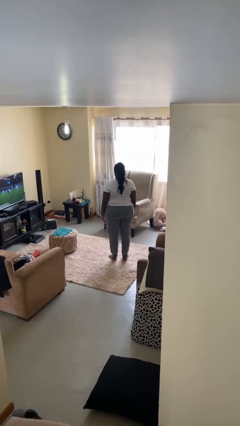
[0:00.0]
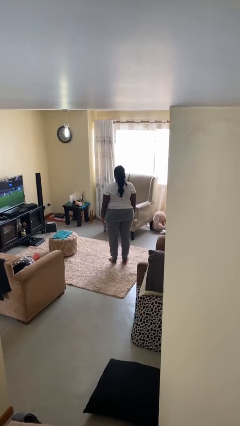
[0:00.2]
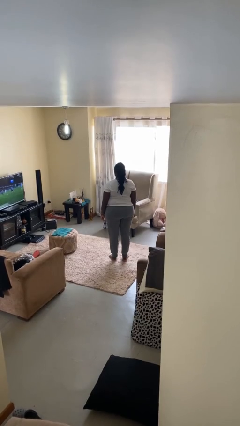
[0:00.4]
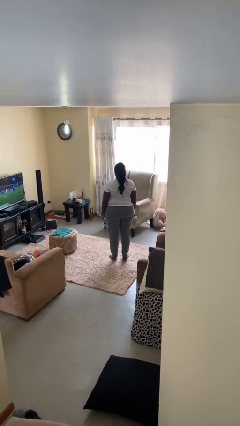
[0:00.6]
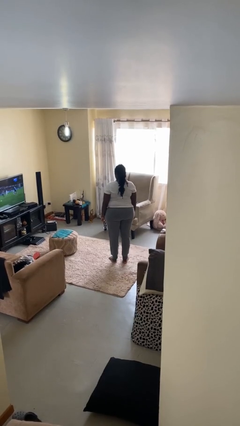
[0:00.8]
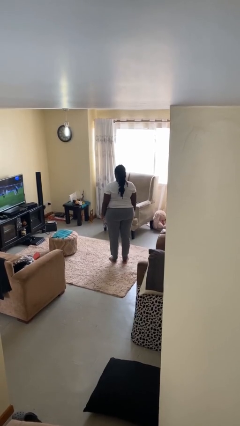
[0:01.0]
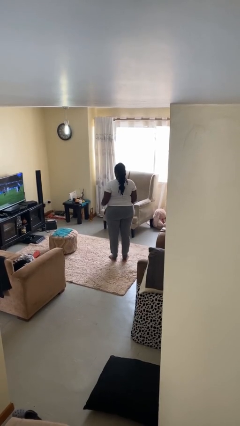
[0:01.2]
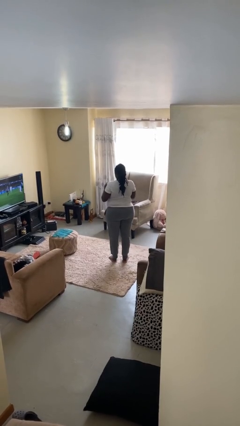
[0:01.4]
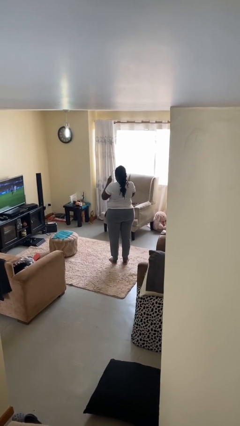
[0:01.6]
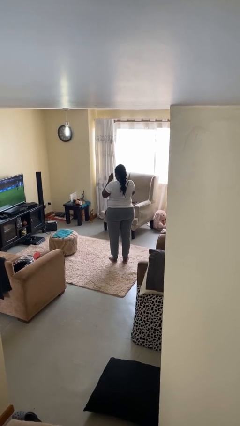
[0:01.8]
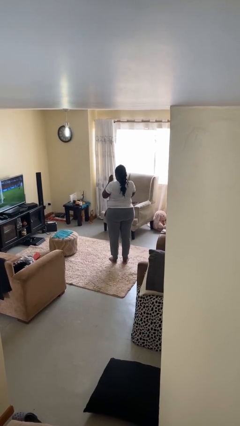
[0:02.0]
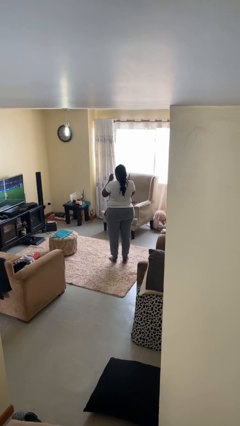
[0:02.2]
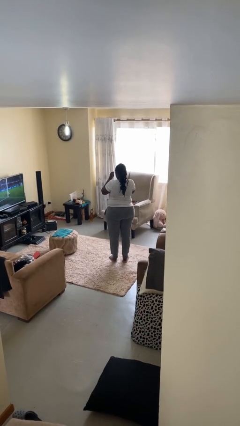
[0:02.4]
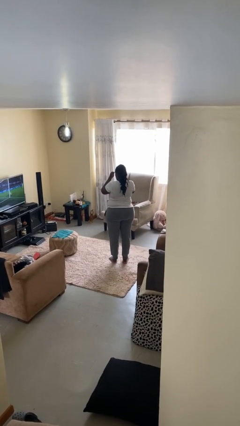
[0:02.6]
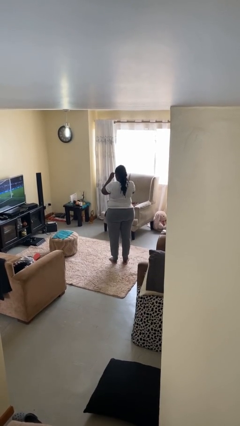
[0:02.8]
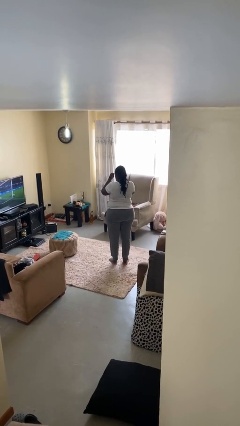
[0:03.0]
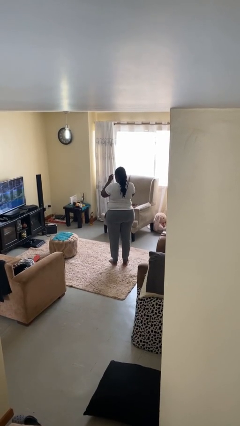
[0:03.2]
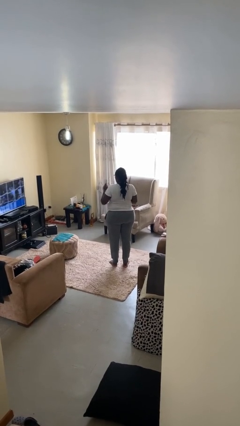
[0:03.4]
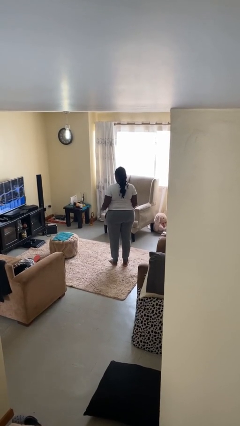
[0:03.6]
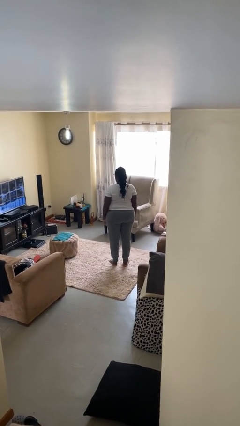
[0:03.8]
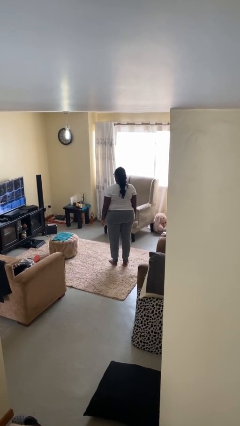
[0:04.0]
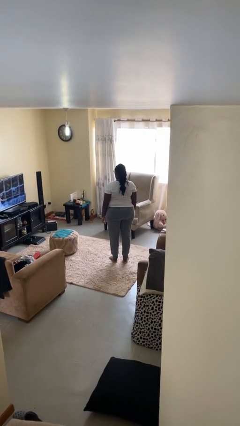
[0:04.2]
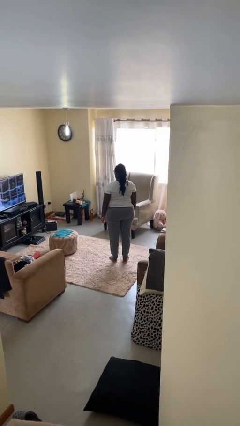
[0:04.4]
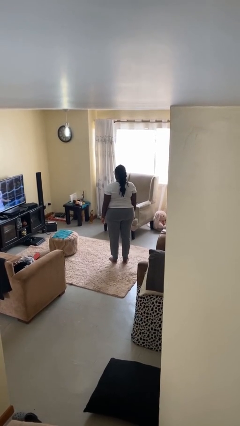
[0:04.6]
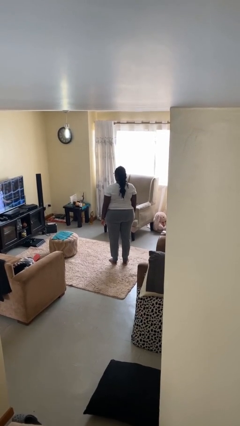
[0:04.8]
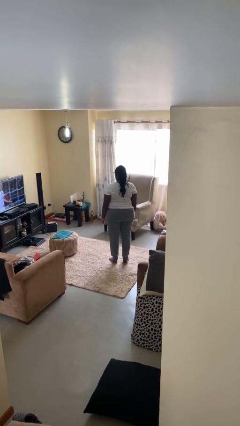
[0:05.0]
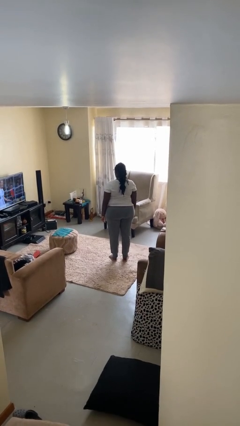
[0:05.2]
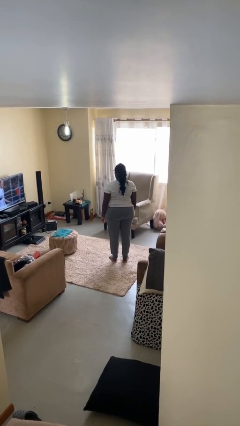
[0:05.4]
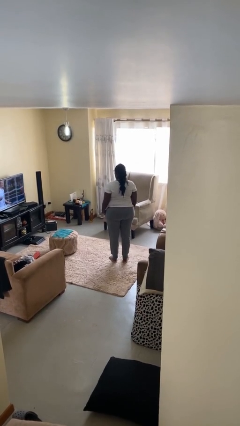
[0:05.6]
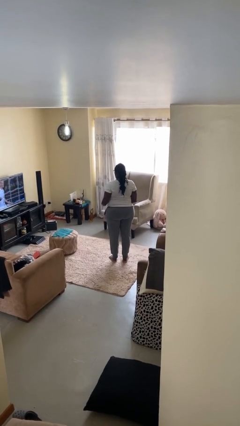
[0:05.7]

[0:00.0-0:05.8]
person puts on glasses

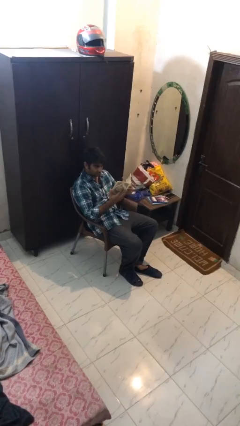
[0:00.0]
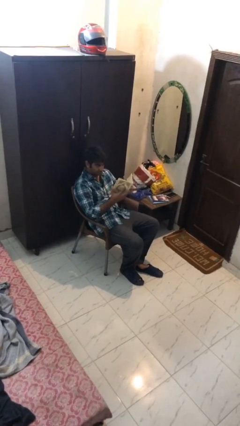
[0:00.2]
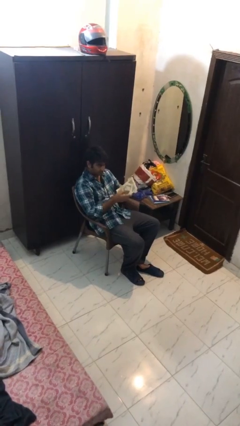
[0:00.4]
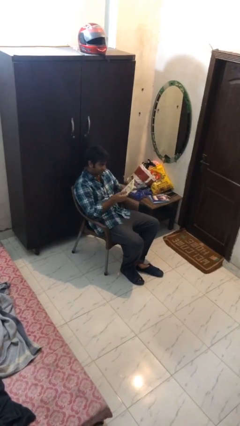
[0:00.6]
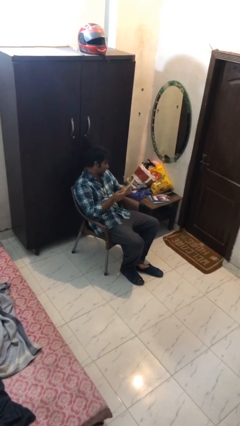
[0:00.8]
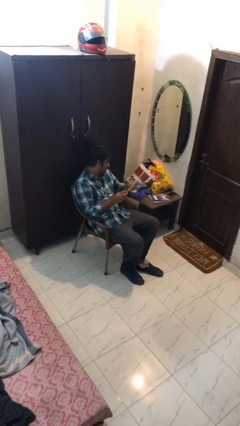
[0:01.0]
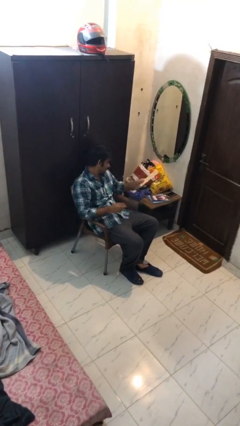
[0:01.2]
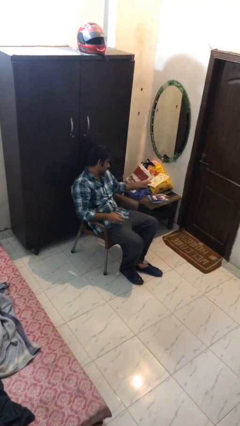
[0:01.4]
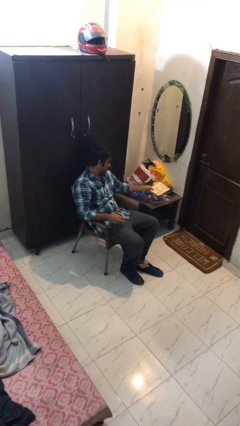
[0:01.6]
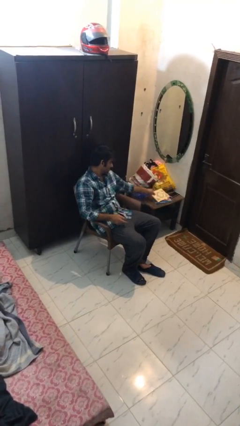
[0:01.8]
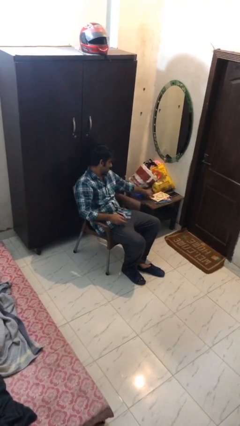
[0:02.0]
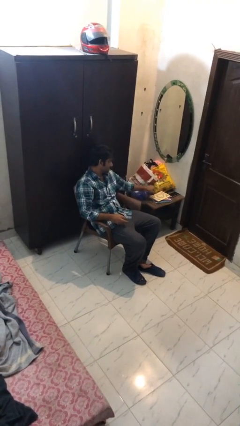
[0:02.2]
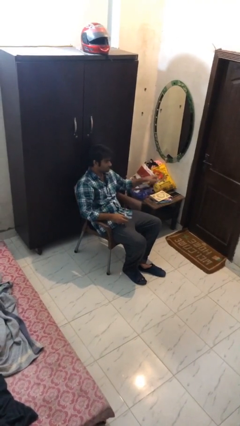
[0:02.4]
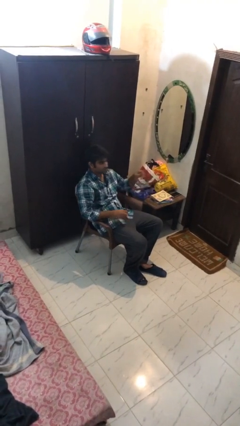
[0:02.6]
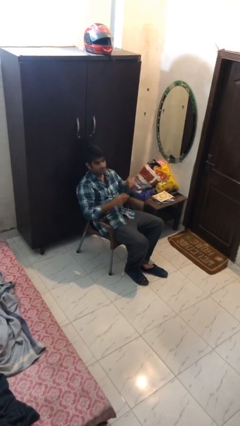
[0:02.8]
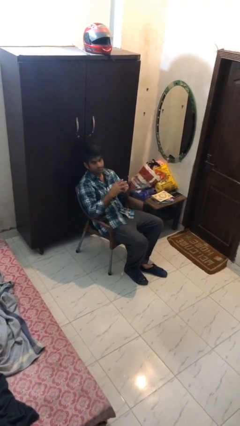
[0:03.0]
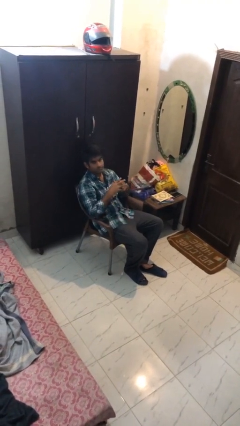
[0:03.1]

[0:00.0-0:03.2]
person puts down object on table

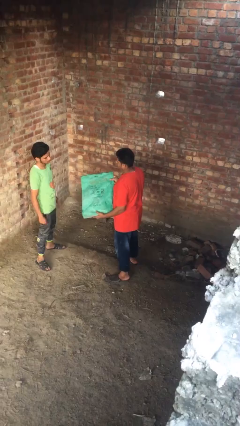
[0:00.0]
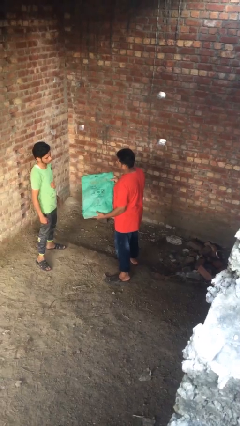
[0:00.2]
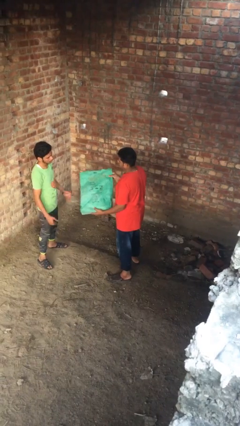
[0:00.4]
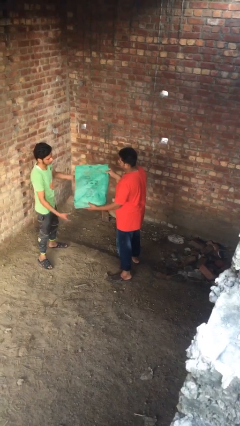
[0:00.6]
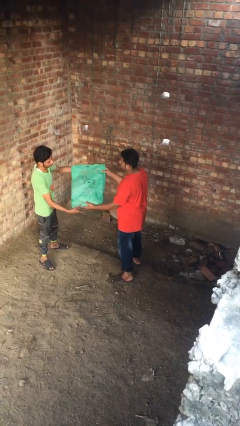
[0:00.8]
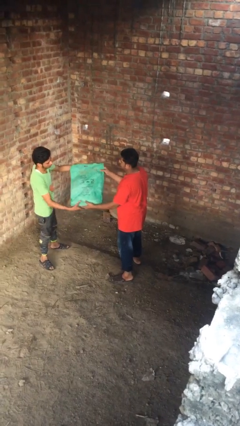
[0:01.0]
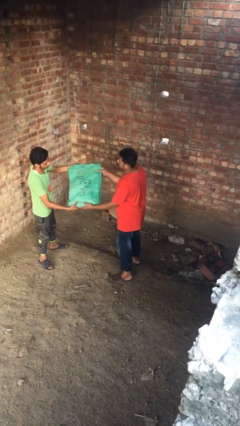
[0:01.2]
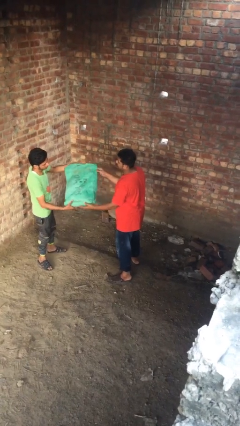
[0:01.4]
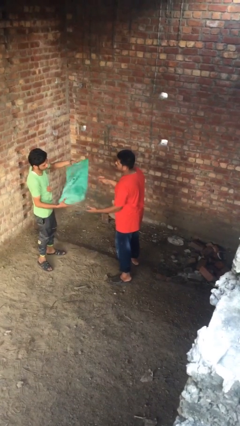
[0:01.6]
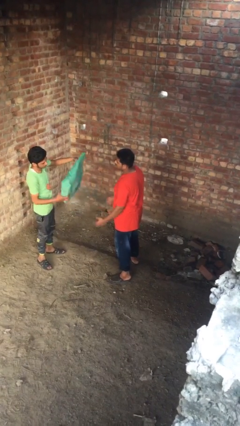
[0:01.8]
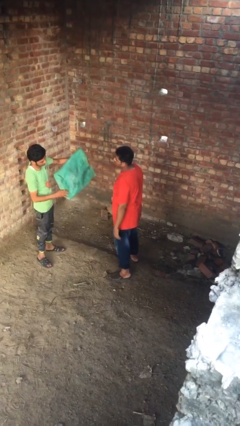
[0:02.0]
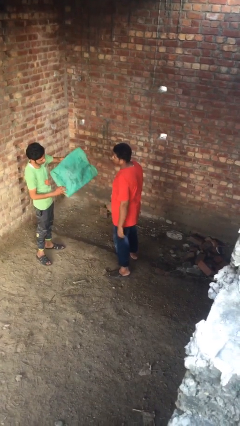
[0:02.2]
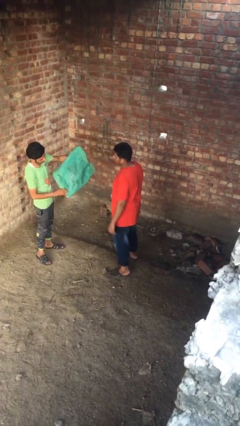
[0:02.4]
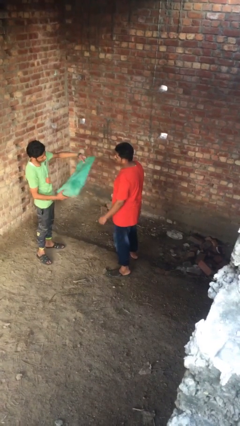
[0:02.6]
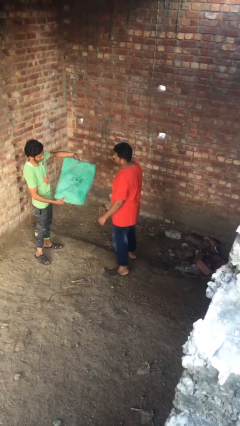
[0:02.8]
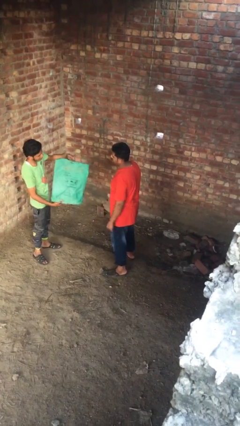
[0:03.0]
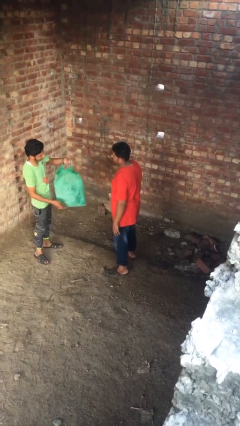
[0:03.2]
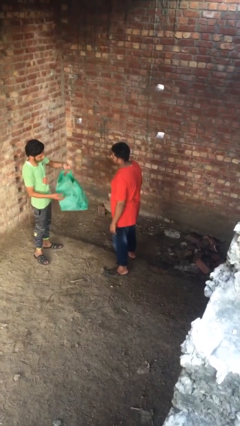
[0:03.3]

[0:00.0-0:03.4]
person transfers object to person

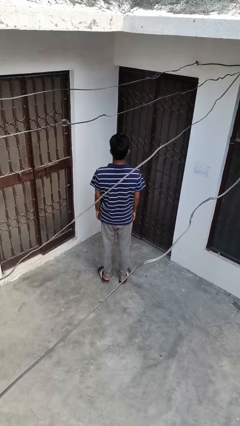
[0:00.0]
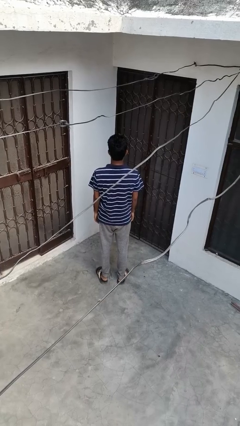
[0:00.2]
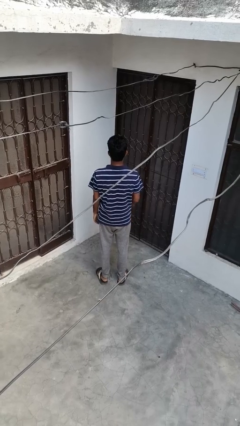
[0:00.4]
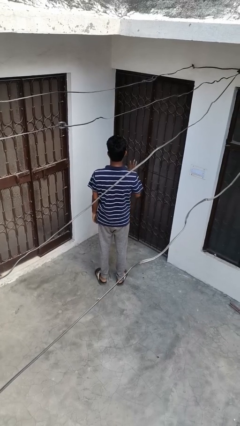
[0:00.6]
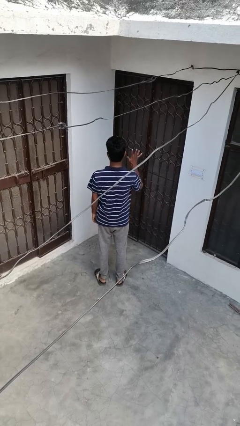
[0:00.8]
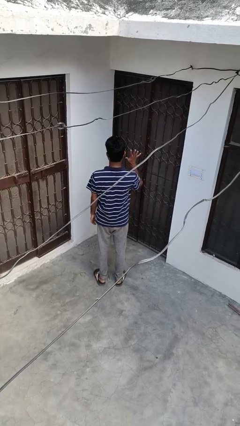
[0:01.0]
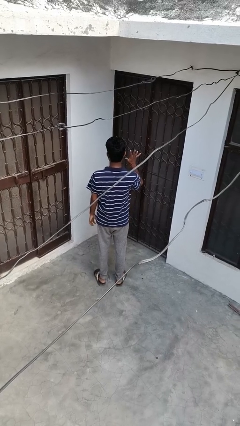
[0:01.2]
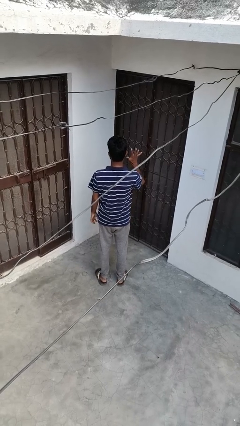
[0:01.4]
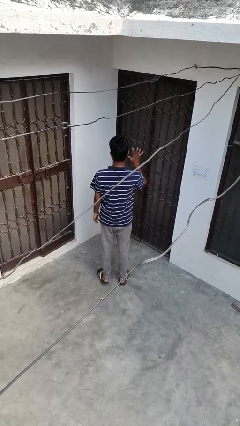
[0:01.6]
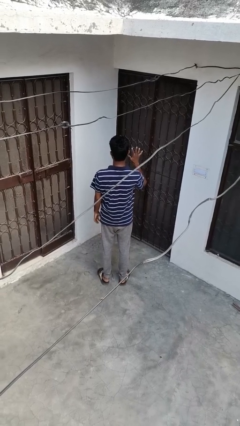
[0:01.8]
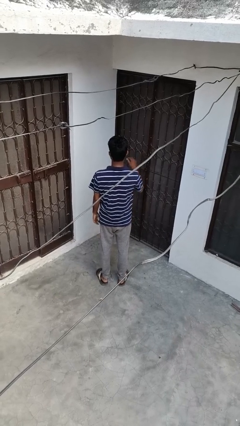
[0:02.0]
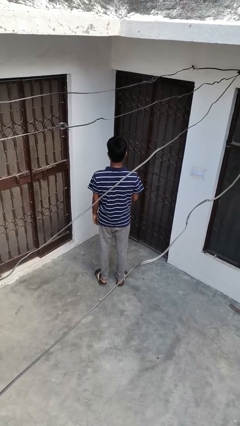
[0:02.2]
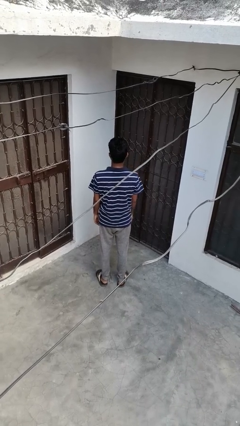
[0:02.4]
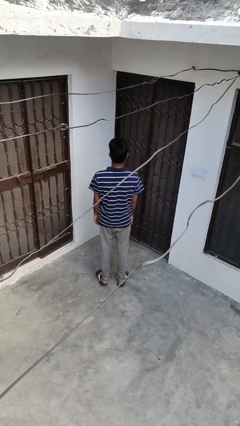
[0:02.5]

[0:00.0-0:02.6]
person gestures number five

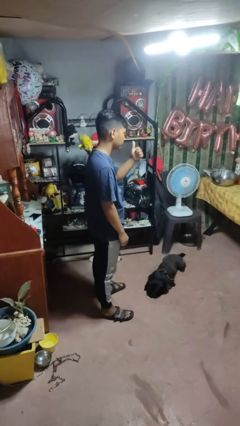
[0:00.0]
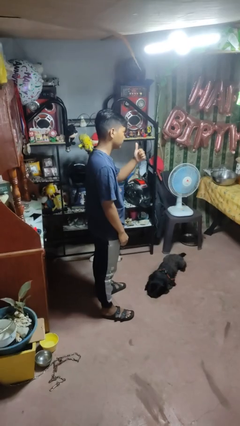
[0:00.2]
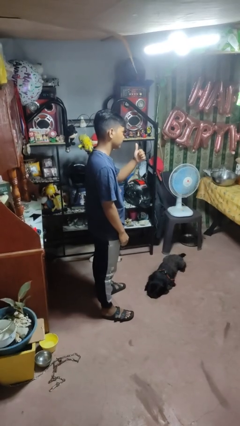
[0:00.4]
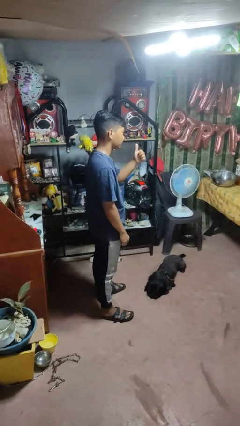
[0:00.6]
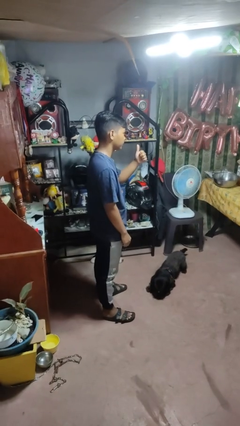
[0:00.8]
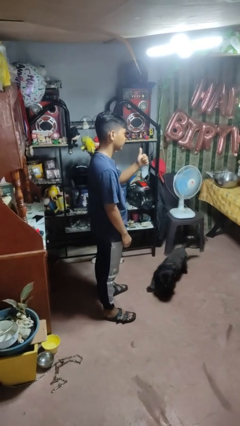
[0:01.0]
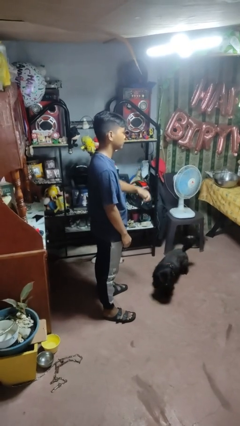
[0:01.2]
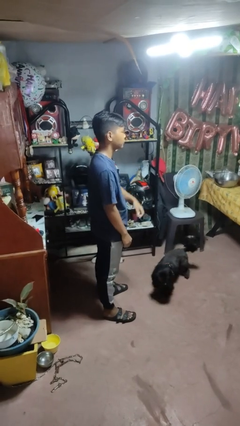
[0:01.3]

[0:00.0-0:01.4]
person gestures thumbs up

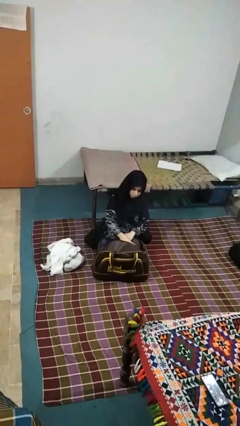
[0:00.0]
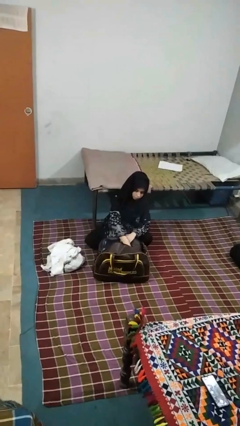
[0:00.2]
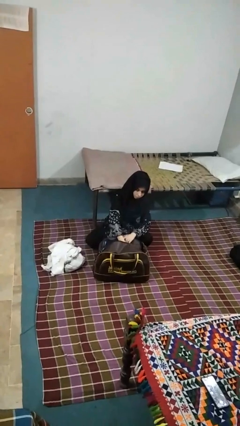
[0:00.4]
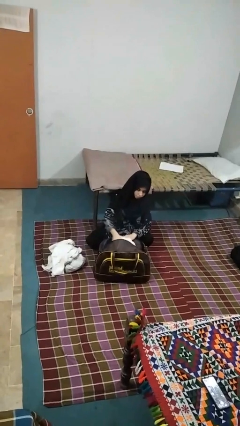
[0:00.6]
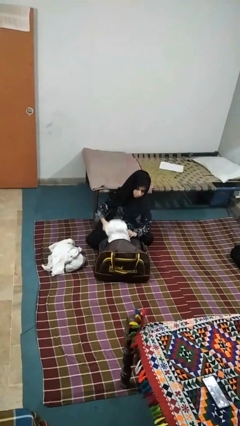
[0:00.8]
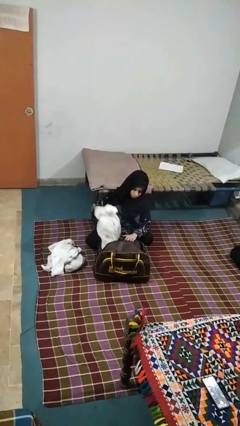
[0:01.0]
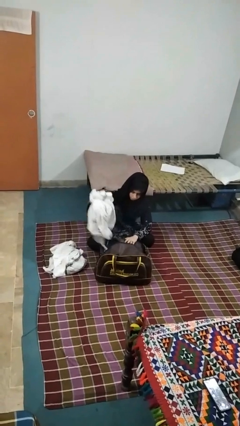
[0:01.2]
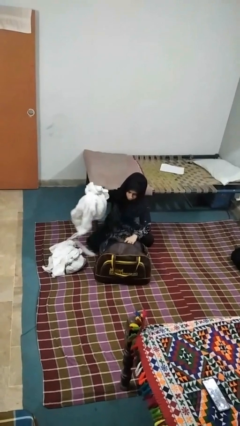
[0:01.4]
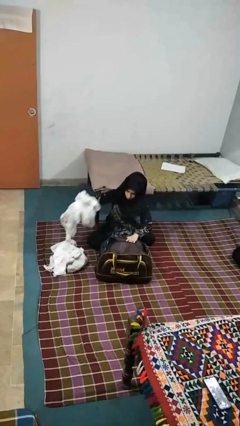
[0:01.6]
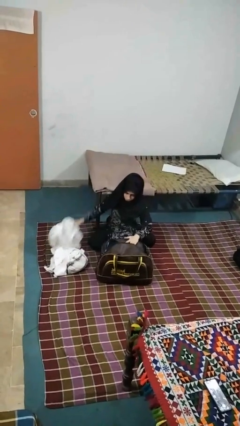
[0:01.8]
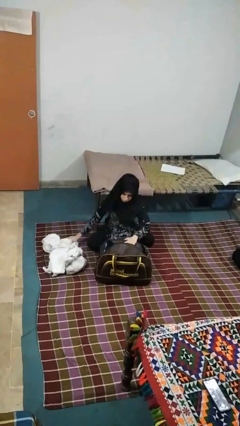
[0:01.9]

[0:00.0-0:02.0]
person unloads clothes from suitcase
